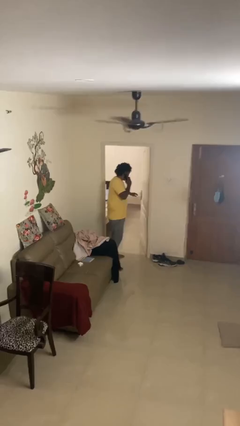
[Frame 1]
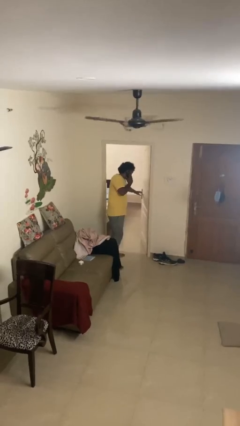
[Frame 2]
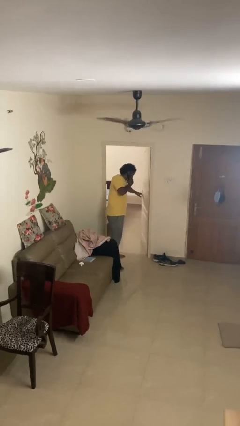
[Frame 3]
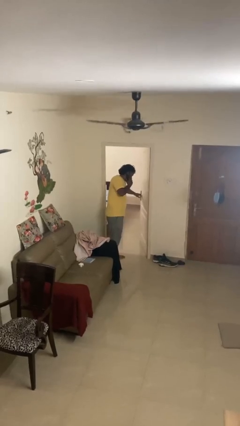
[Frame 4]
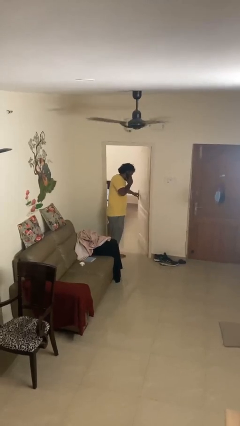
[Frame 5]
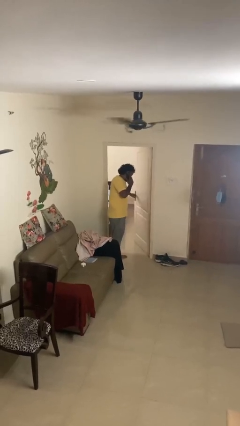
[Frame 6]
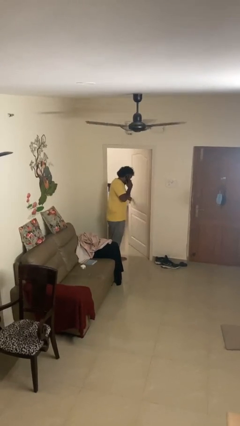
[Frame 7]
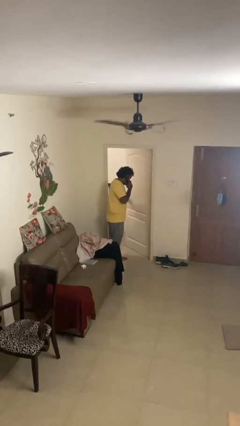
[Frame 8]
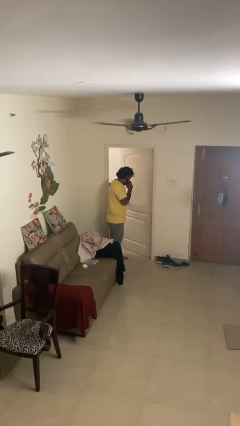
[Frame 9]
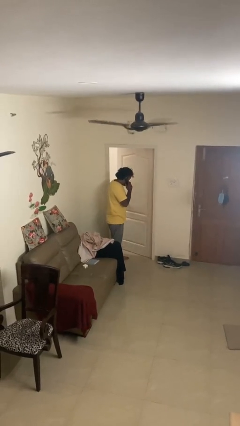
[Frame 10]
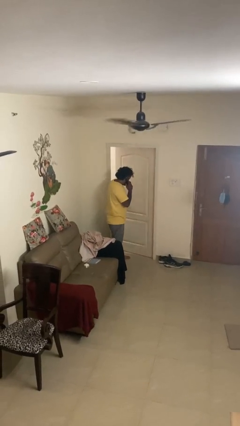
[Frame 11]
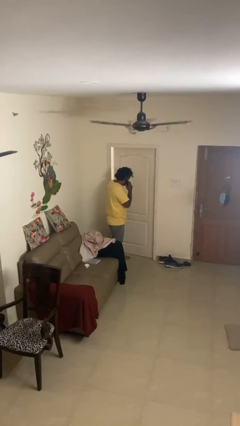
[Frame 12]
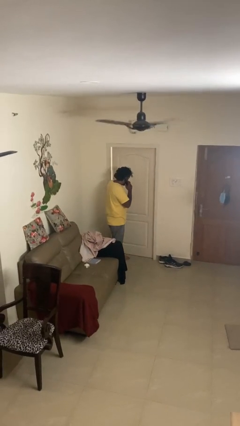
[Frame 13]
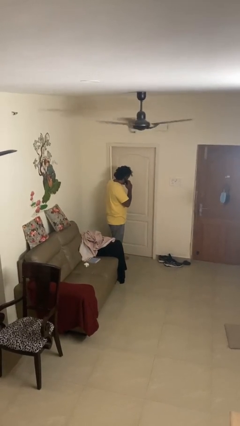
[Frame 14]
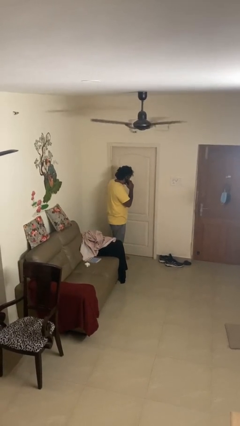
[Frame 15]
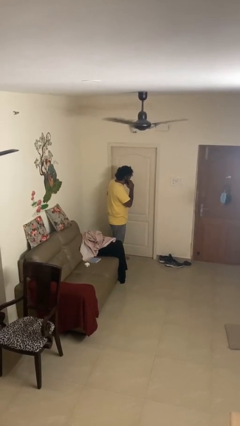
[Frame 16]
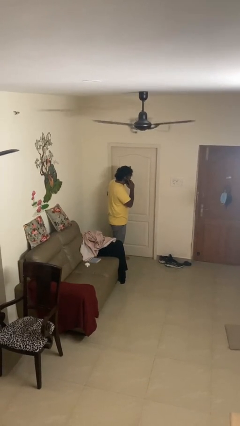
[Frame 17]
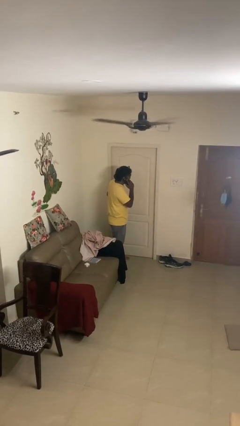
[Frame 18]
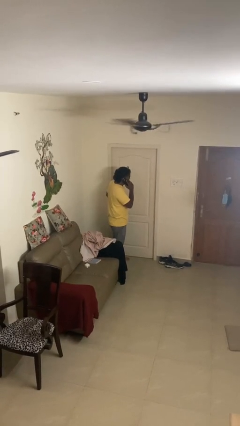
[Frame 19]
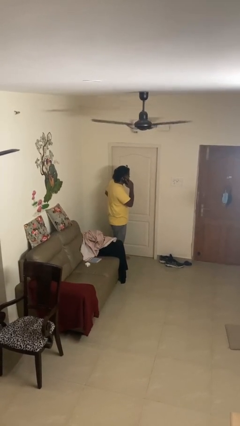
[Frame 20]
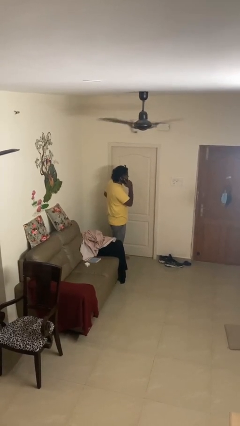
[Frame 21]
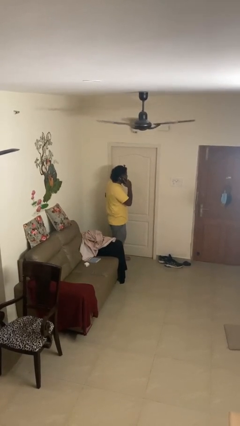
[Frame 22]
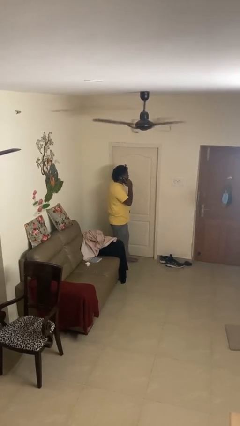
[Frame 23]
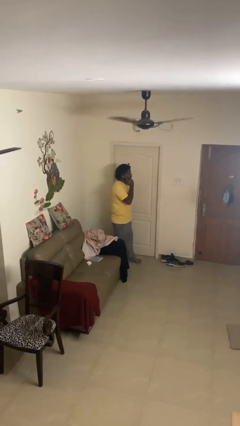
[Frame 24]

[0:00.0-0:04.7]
person closes facility door

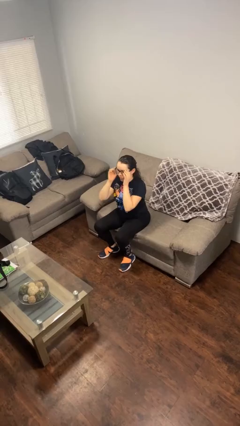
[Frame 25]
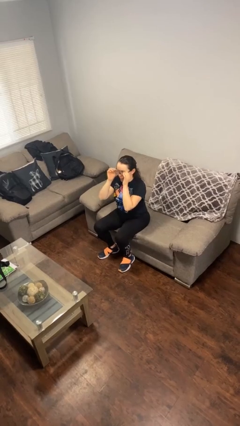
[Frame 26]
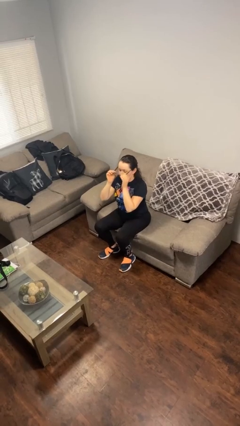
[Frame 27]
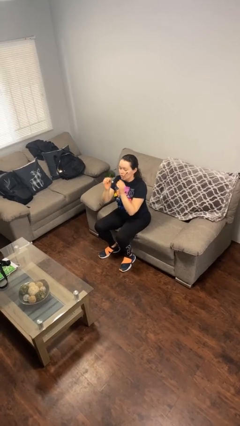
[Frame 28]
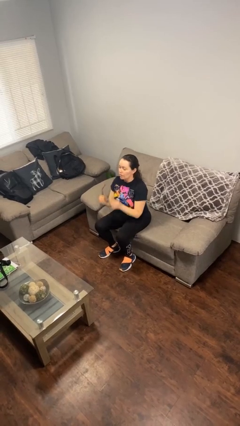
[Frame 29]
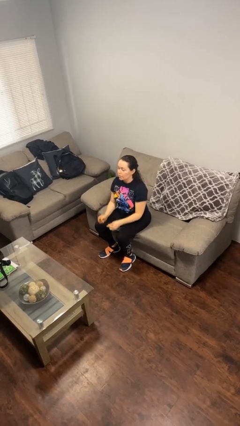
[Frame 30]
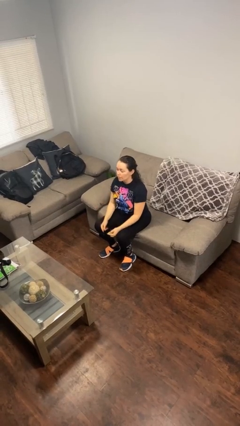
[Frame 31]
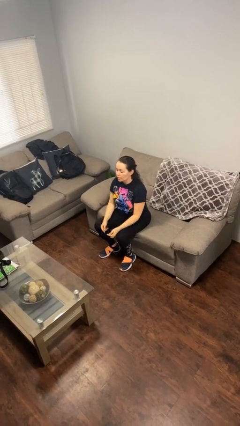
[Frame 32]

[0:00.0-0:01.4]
person takes off glasses

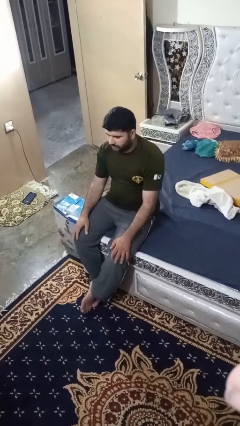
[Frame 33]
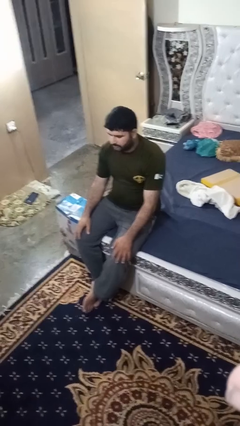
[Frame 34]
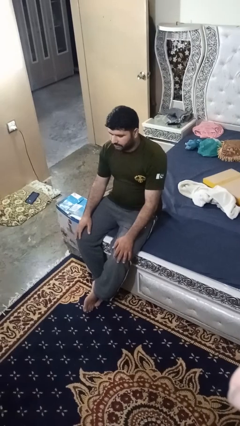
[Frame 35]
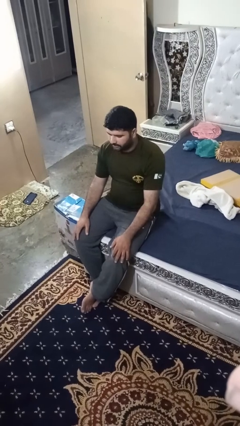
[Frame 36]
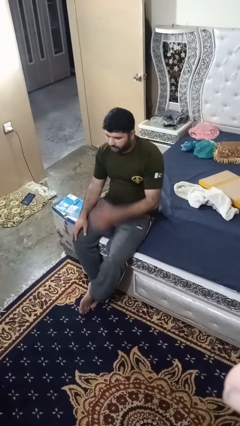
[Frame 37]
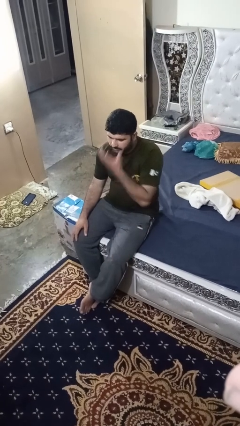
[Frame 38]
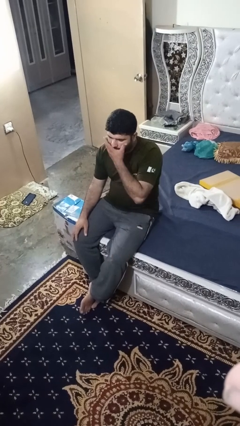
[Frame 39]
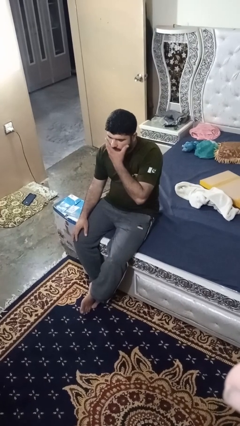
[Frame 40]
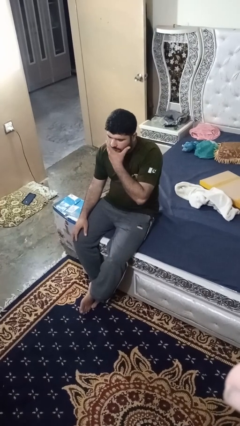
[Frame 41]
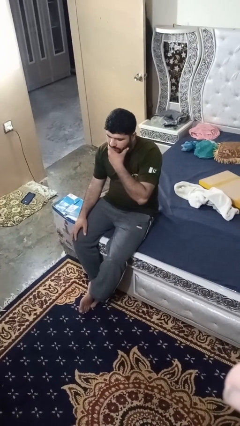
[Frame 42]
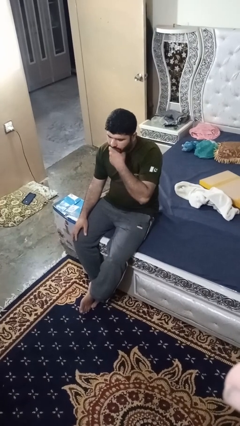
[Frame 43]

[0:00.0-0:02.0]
person strokes chin

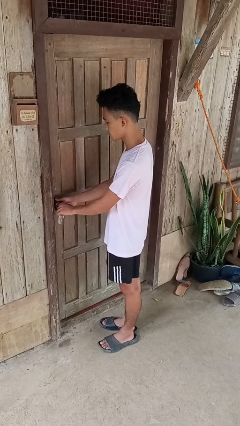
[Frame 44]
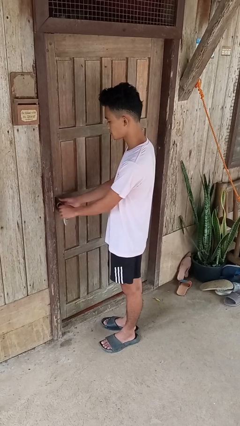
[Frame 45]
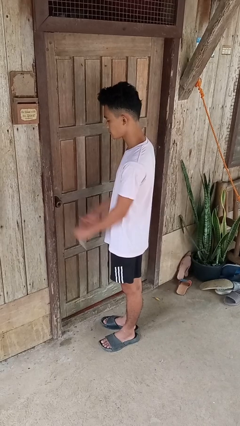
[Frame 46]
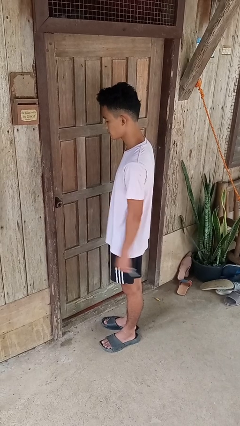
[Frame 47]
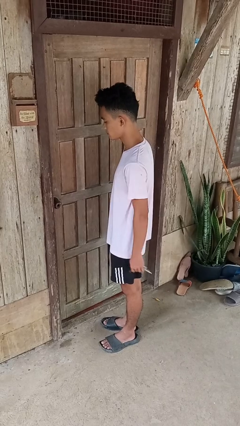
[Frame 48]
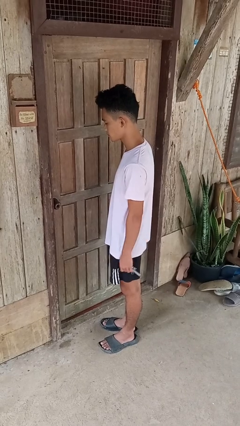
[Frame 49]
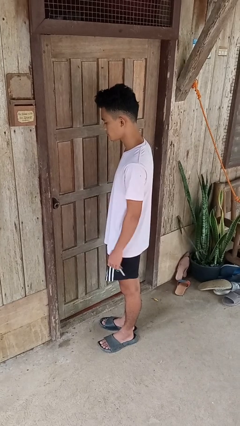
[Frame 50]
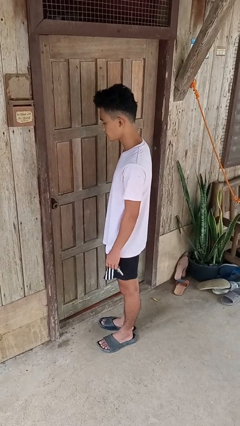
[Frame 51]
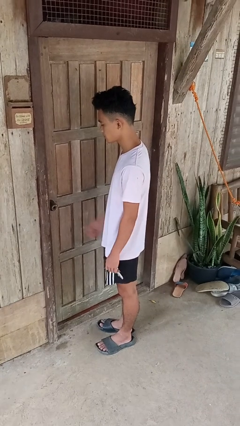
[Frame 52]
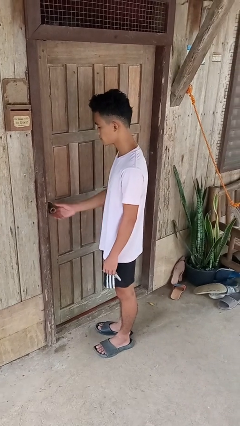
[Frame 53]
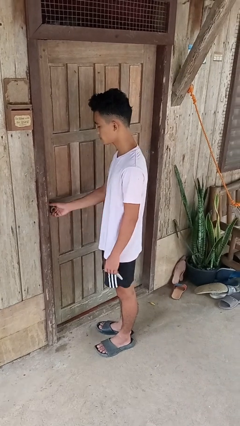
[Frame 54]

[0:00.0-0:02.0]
person unlocks door with keys

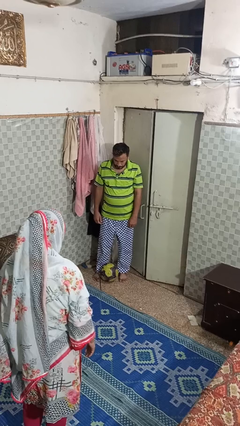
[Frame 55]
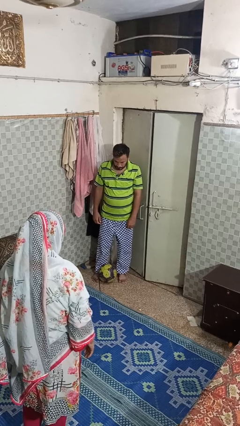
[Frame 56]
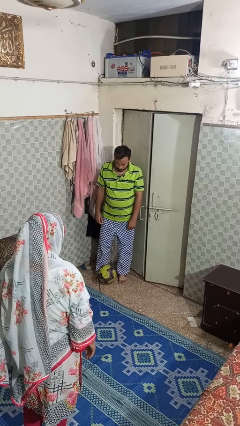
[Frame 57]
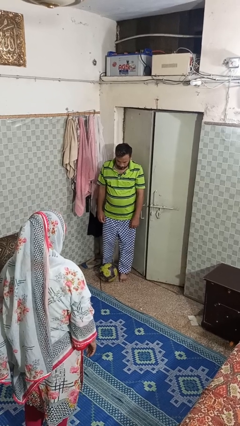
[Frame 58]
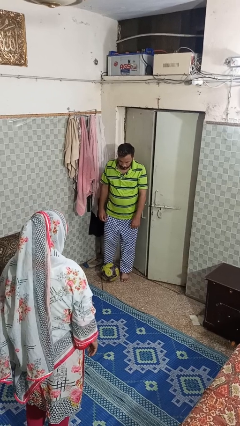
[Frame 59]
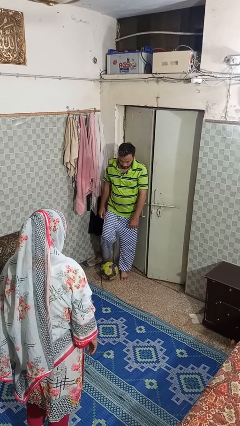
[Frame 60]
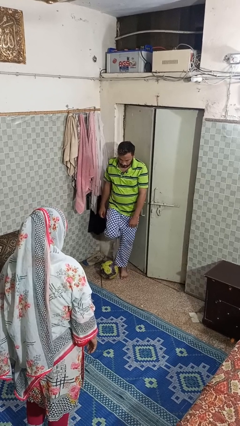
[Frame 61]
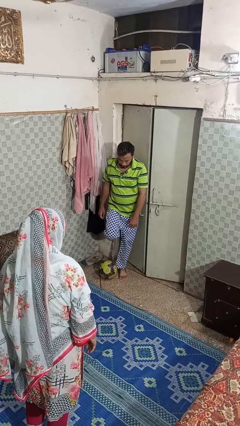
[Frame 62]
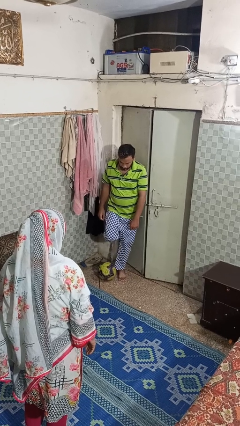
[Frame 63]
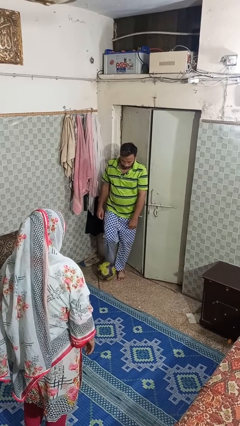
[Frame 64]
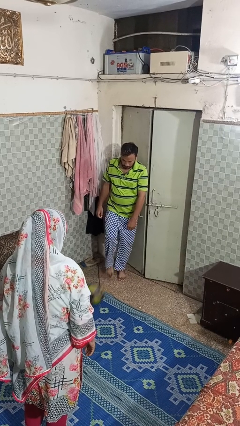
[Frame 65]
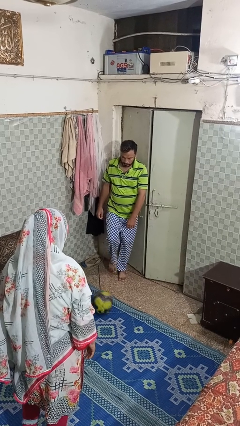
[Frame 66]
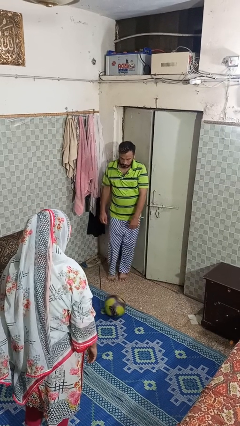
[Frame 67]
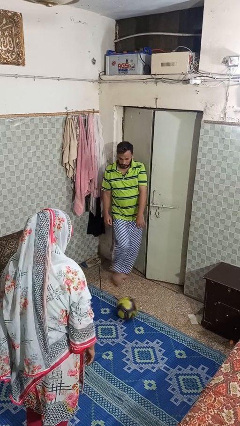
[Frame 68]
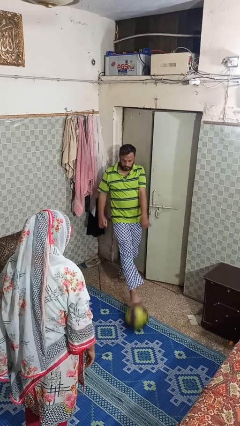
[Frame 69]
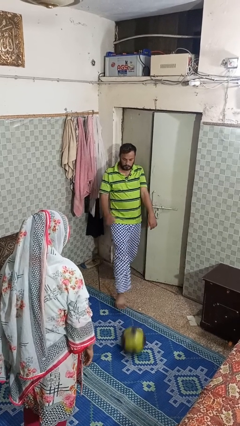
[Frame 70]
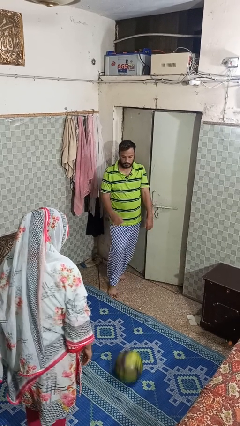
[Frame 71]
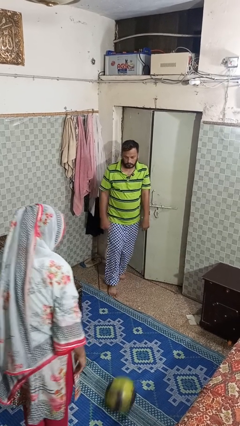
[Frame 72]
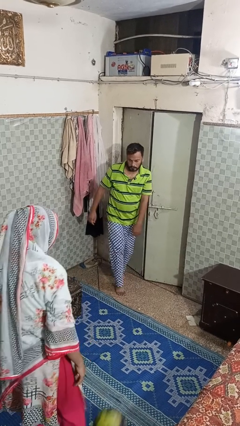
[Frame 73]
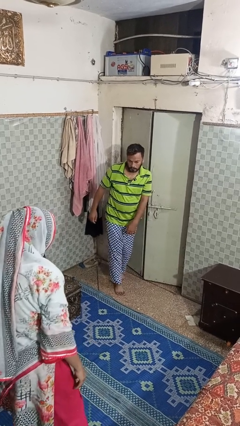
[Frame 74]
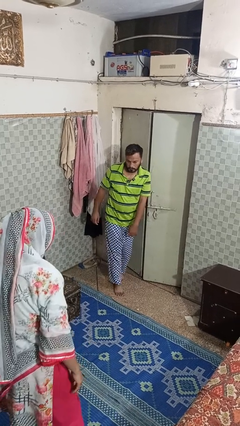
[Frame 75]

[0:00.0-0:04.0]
person kicks object to person

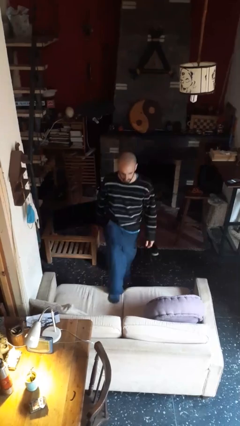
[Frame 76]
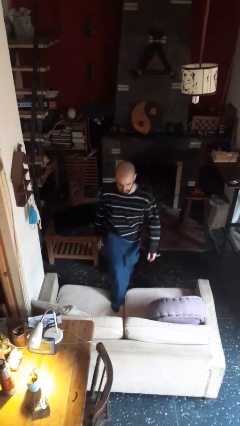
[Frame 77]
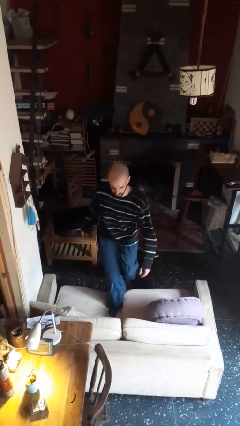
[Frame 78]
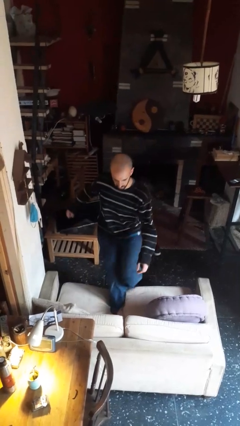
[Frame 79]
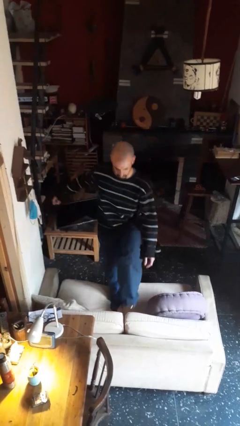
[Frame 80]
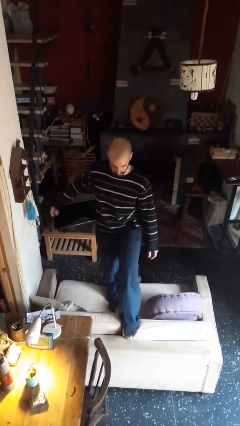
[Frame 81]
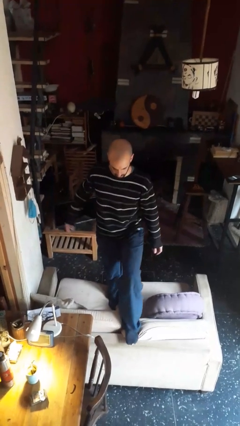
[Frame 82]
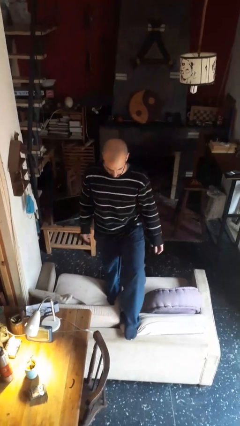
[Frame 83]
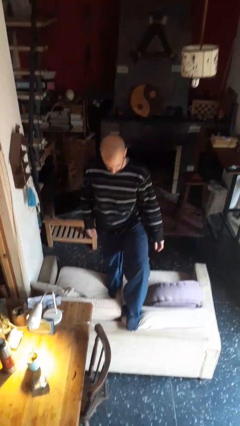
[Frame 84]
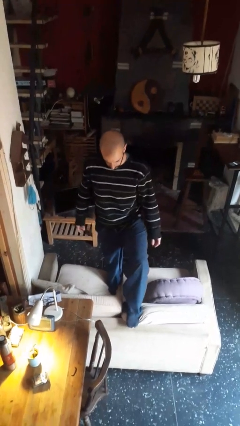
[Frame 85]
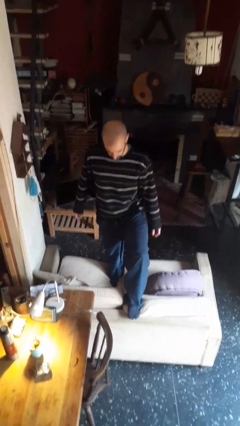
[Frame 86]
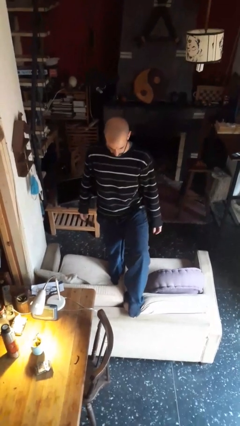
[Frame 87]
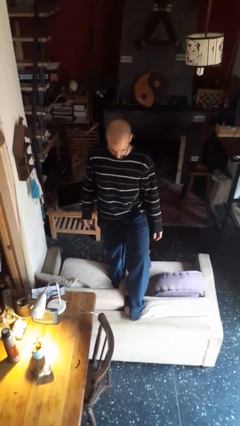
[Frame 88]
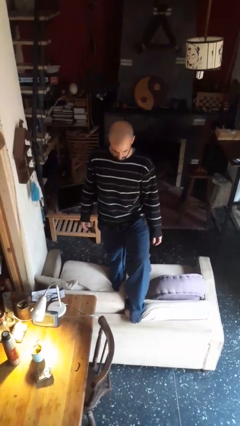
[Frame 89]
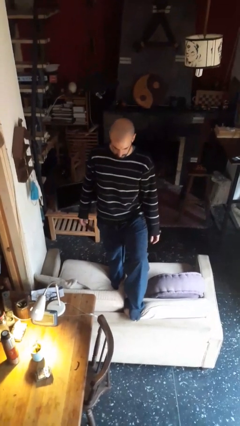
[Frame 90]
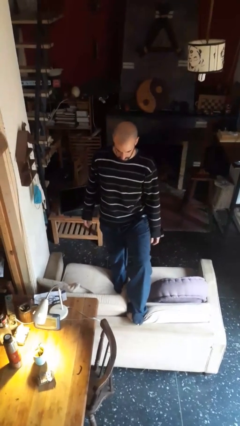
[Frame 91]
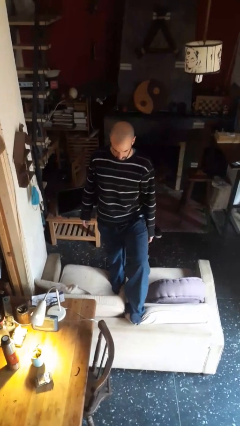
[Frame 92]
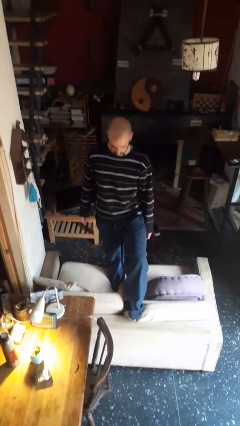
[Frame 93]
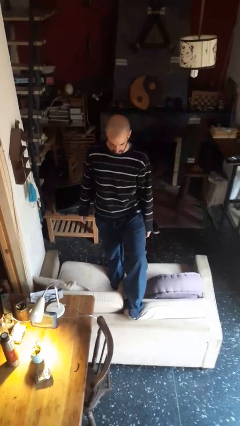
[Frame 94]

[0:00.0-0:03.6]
person climbs on couch
